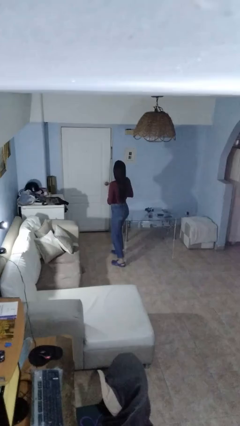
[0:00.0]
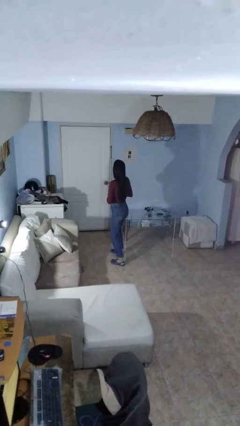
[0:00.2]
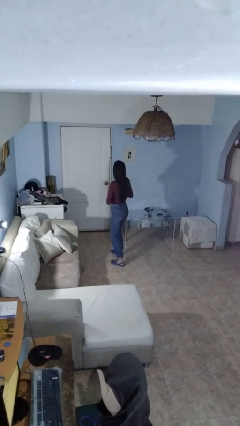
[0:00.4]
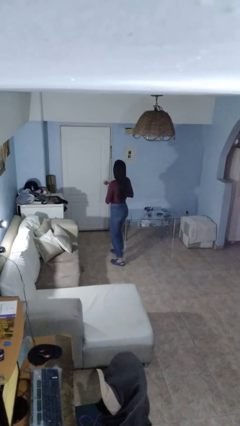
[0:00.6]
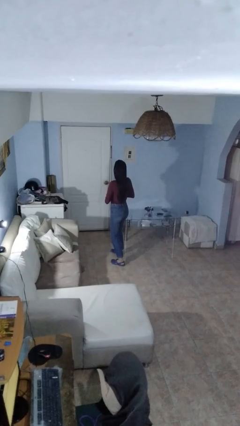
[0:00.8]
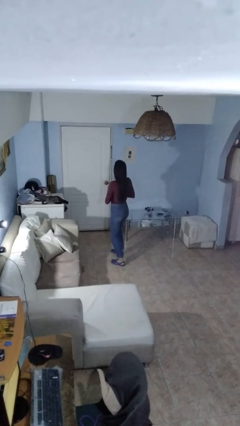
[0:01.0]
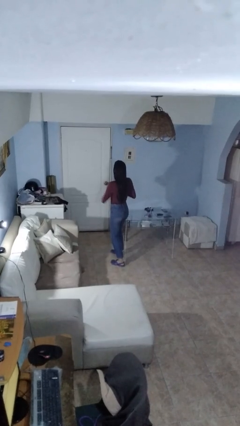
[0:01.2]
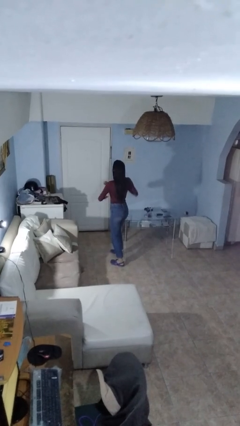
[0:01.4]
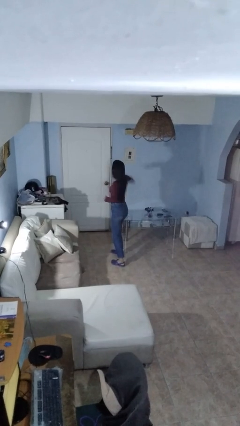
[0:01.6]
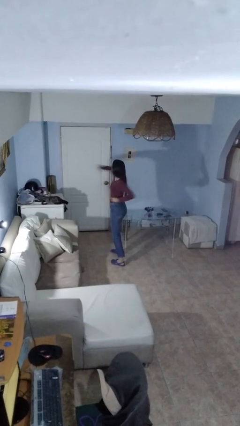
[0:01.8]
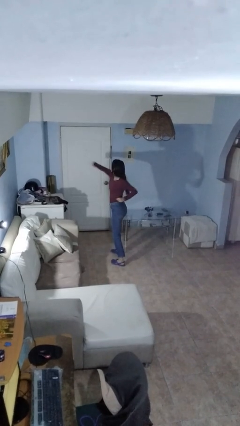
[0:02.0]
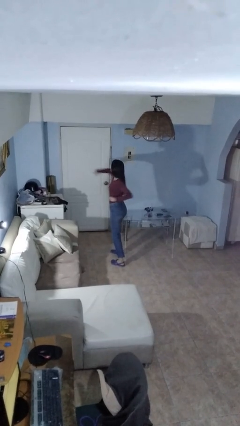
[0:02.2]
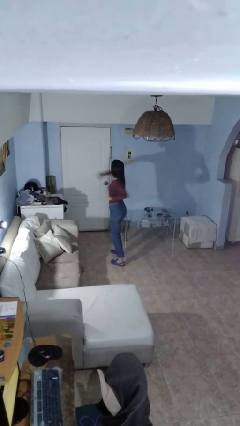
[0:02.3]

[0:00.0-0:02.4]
person karate chop

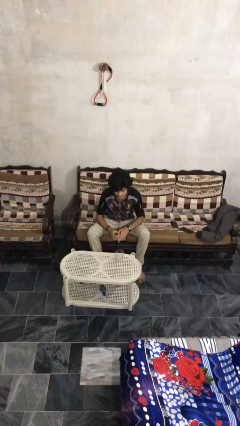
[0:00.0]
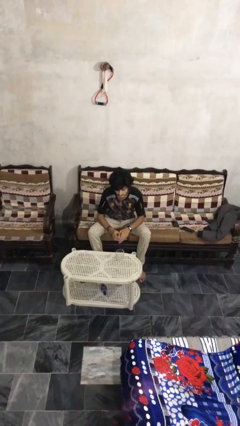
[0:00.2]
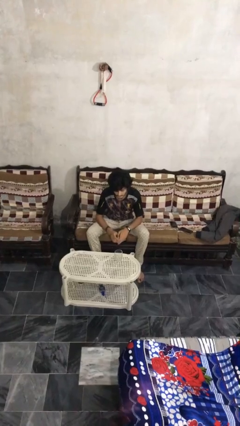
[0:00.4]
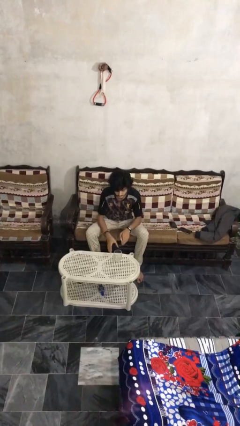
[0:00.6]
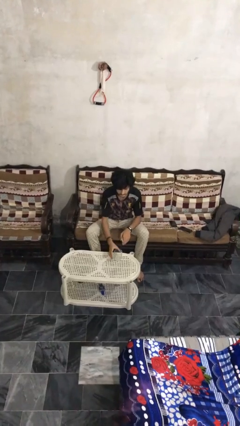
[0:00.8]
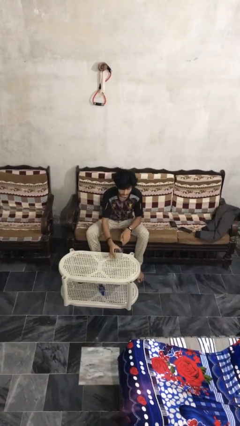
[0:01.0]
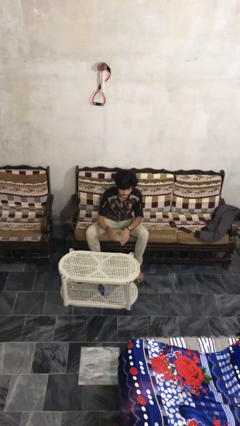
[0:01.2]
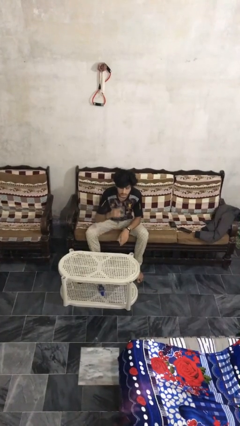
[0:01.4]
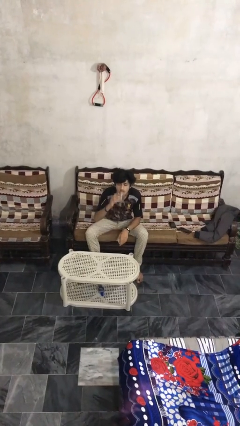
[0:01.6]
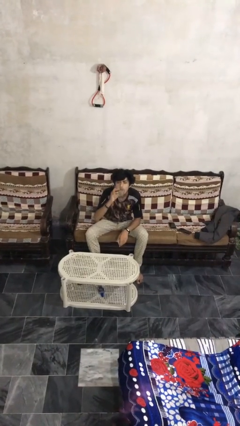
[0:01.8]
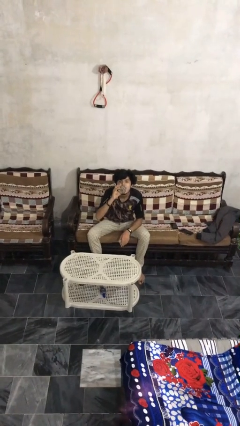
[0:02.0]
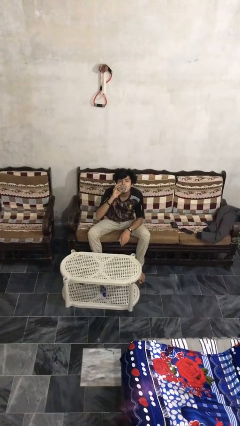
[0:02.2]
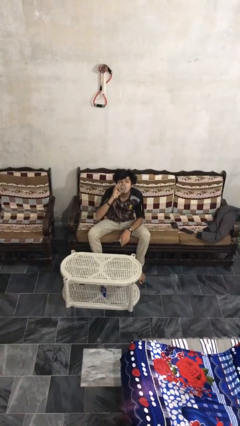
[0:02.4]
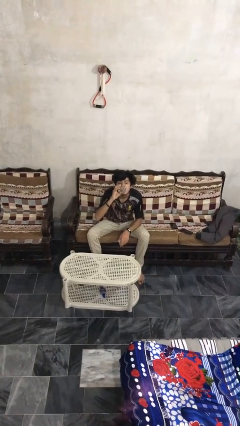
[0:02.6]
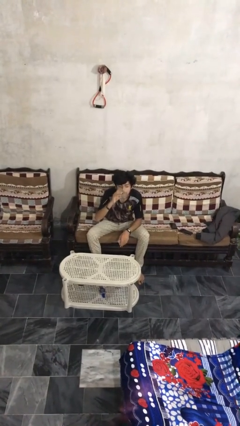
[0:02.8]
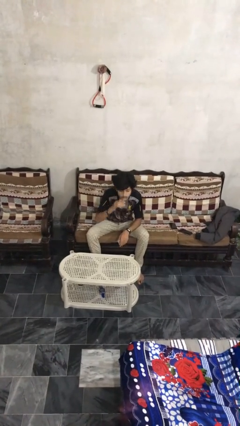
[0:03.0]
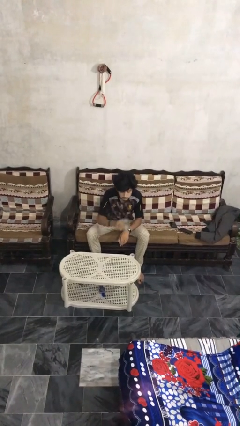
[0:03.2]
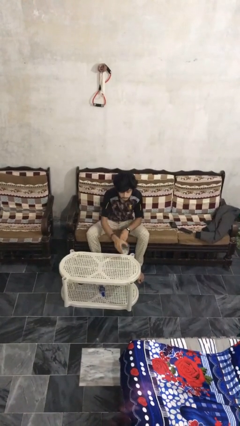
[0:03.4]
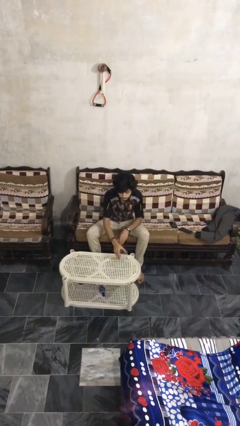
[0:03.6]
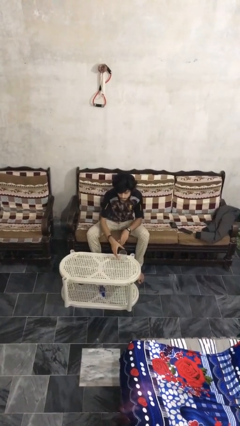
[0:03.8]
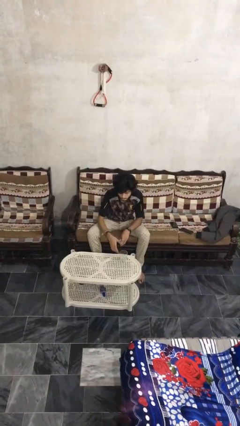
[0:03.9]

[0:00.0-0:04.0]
person drinks from cup

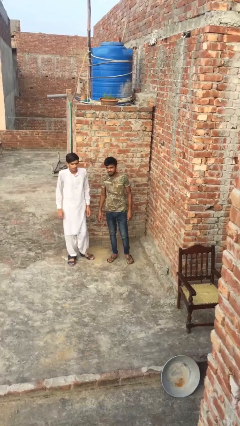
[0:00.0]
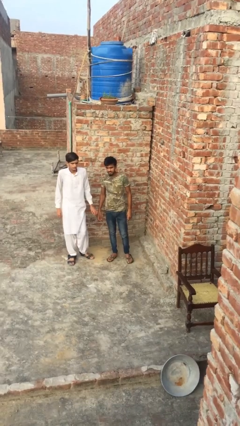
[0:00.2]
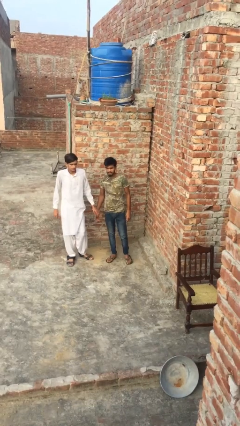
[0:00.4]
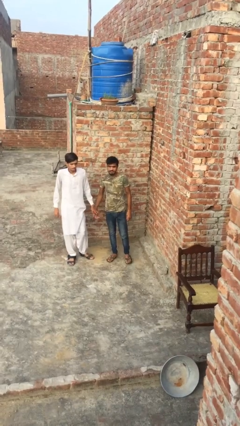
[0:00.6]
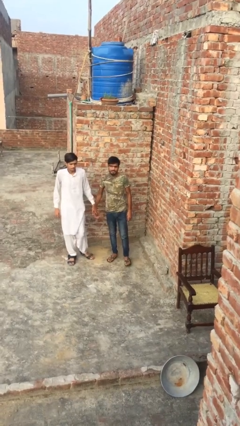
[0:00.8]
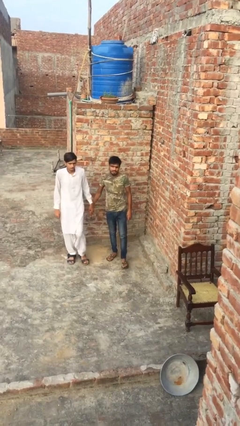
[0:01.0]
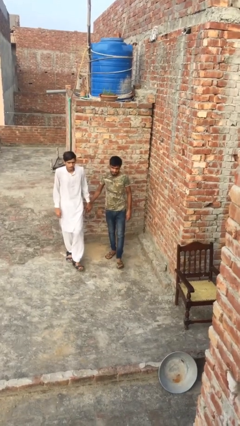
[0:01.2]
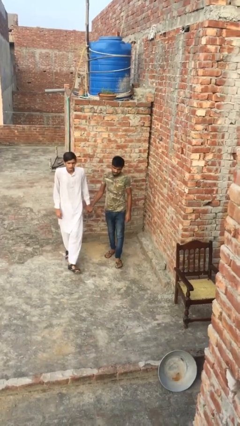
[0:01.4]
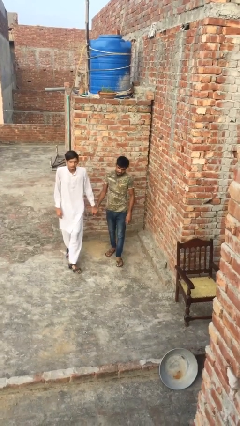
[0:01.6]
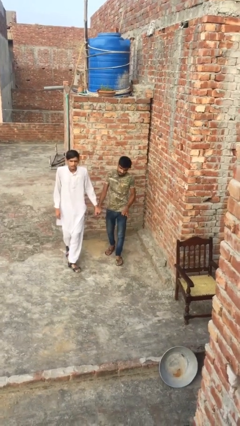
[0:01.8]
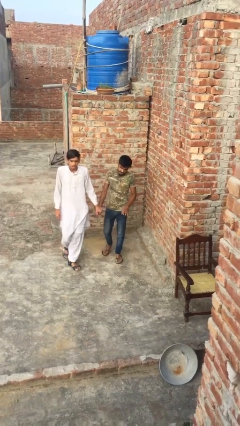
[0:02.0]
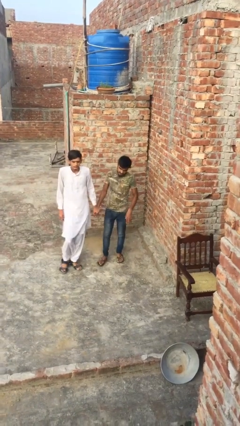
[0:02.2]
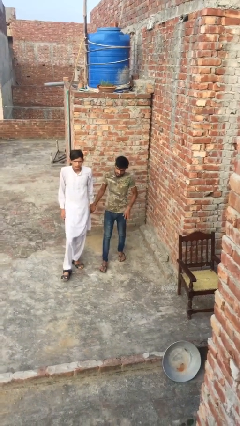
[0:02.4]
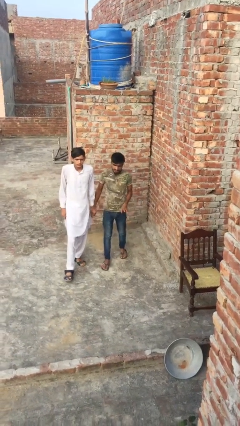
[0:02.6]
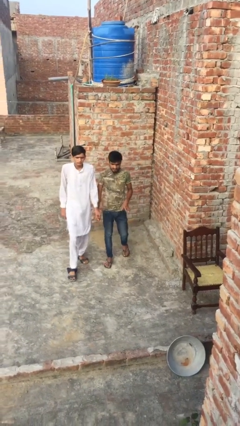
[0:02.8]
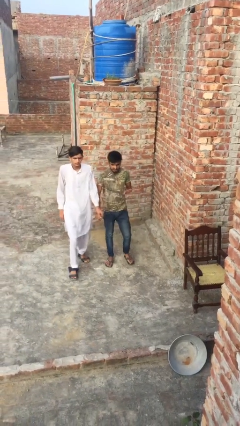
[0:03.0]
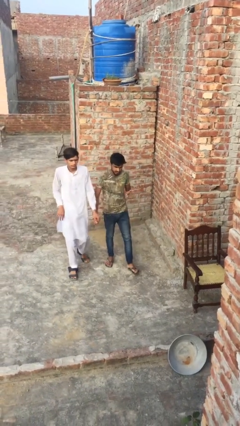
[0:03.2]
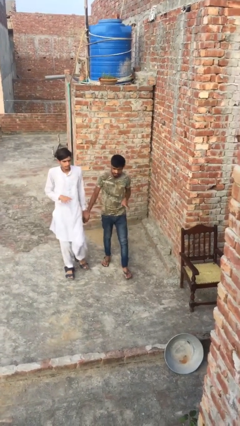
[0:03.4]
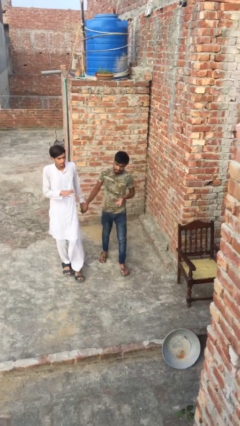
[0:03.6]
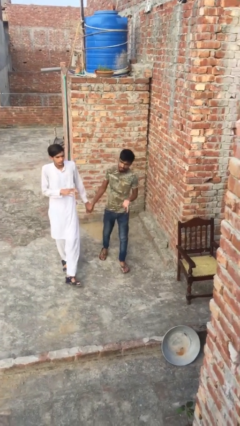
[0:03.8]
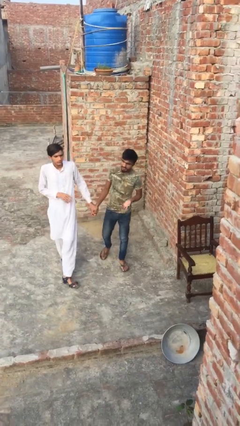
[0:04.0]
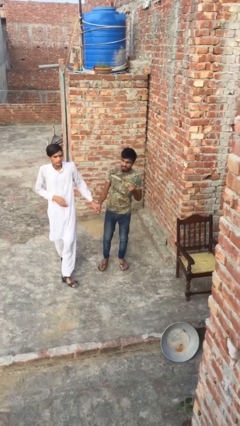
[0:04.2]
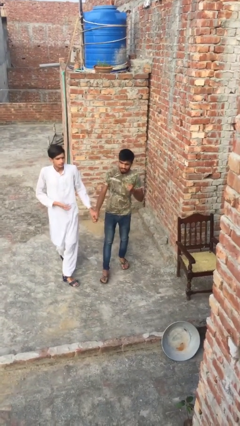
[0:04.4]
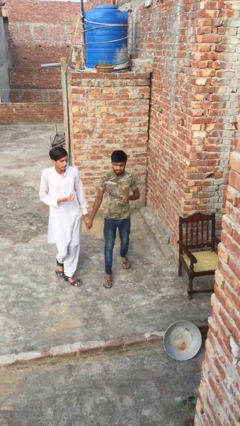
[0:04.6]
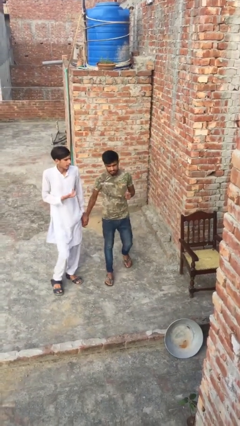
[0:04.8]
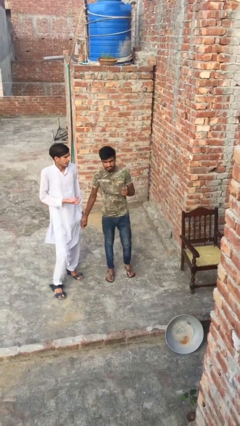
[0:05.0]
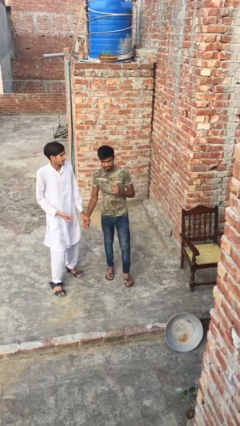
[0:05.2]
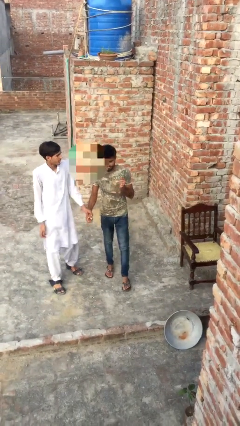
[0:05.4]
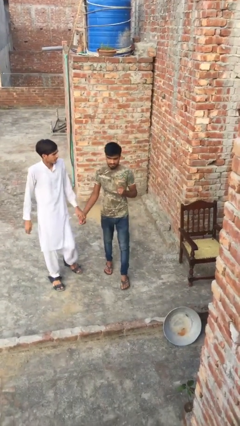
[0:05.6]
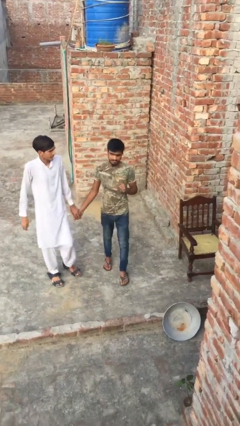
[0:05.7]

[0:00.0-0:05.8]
person holds hand

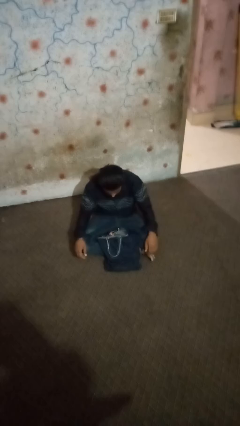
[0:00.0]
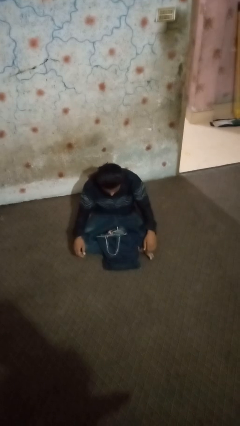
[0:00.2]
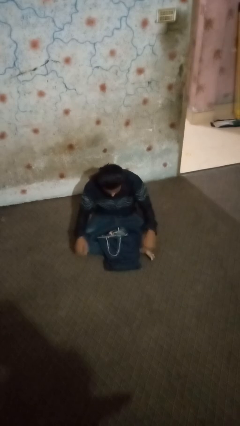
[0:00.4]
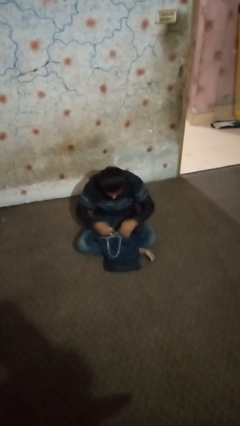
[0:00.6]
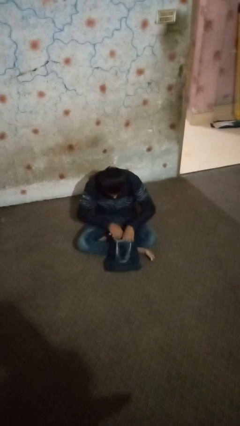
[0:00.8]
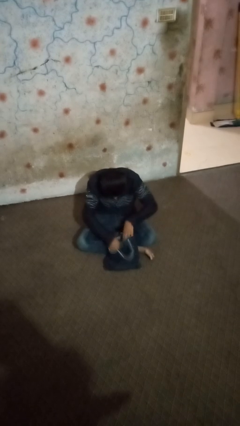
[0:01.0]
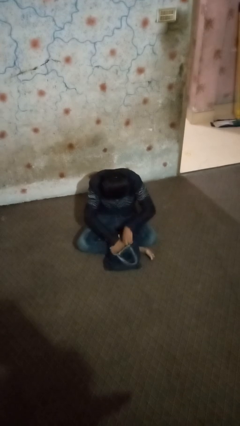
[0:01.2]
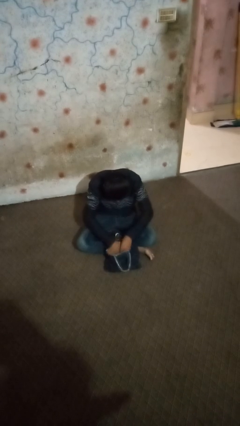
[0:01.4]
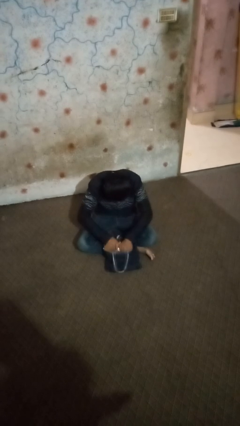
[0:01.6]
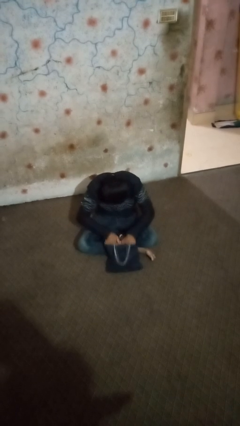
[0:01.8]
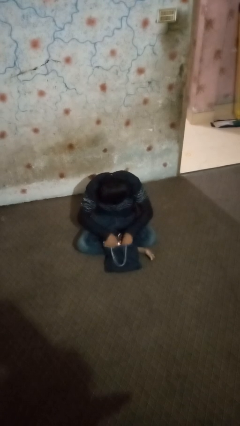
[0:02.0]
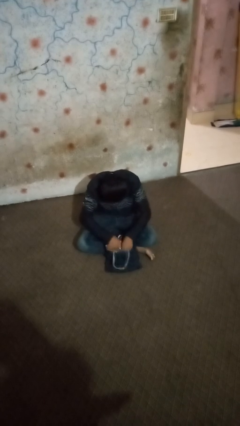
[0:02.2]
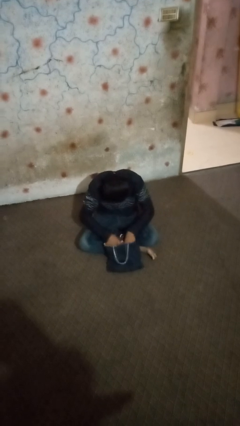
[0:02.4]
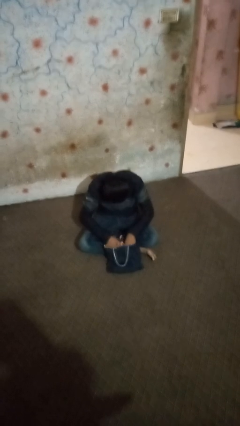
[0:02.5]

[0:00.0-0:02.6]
person searches in bag

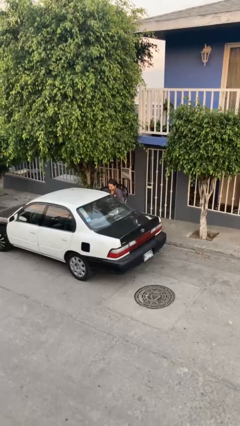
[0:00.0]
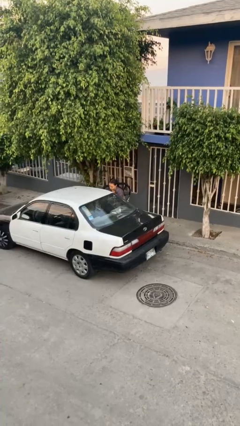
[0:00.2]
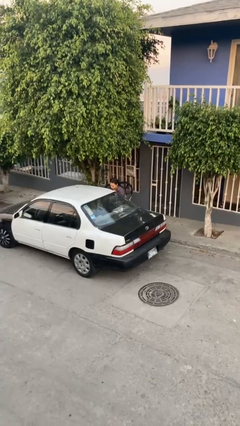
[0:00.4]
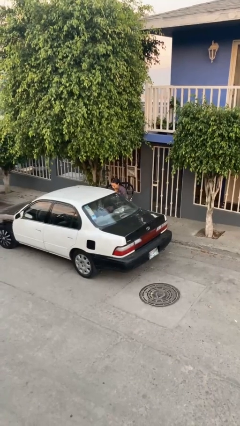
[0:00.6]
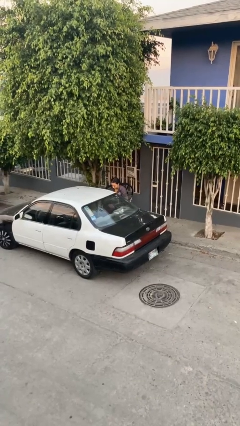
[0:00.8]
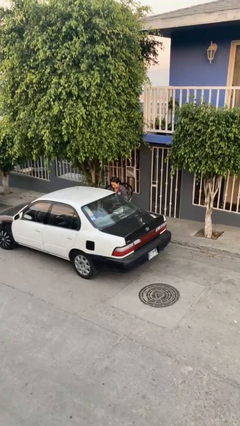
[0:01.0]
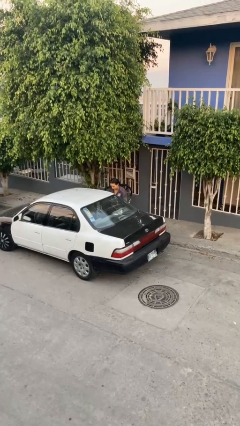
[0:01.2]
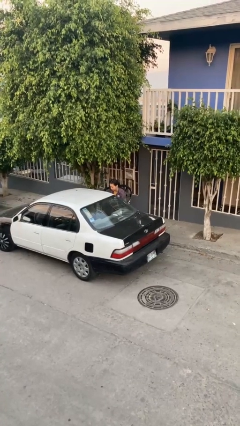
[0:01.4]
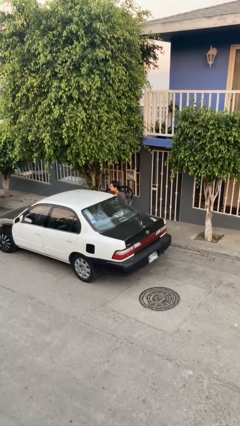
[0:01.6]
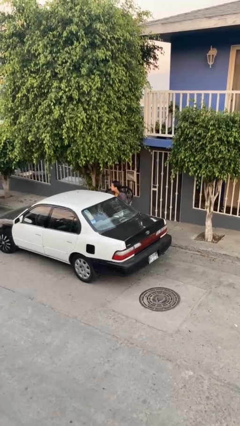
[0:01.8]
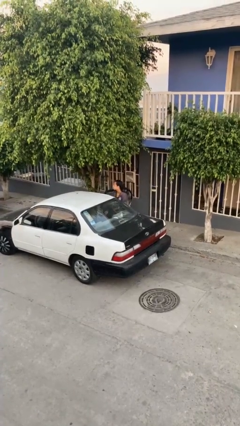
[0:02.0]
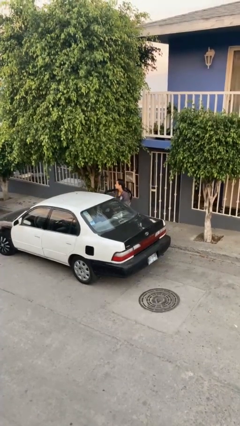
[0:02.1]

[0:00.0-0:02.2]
person loads car

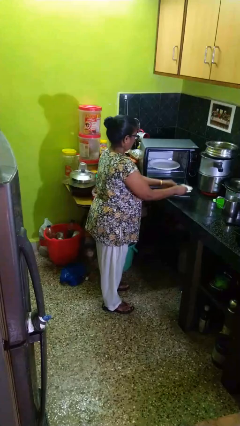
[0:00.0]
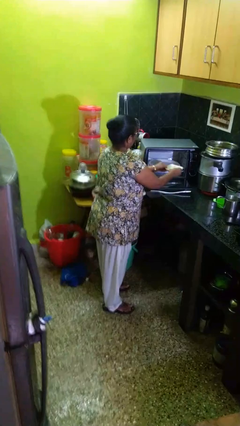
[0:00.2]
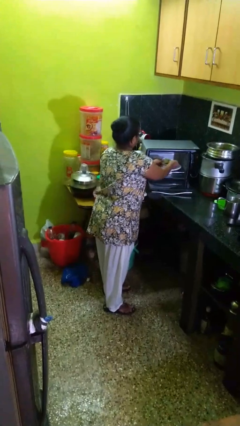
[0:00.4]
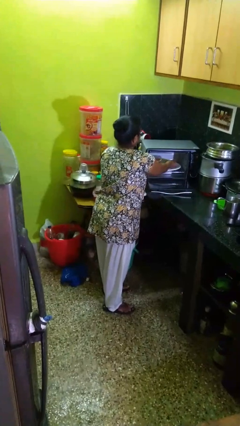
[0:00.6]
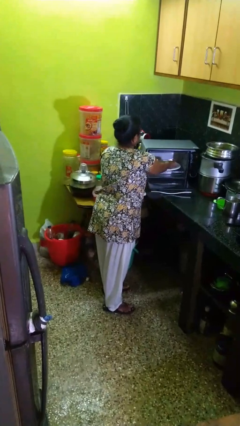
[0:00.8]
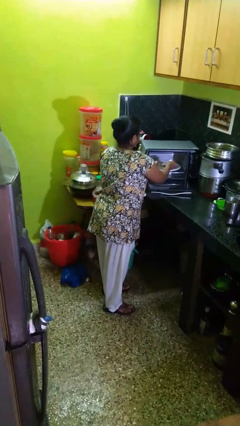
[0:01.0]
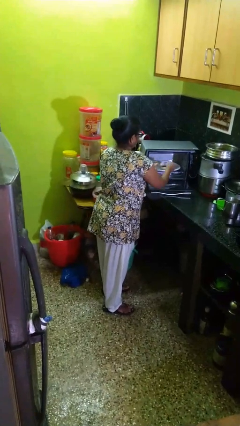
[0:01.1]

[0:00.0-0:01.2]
person puts object into microwave
